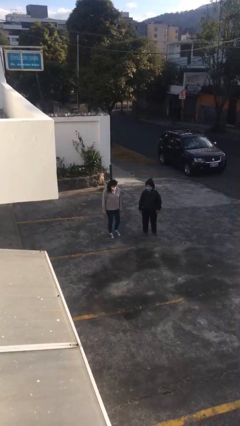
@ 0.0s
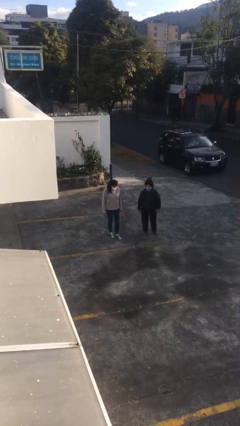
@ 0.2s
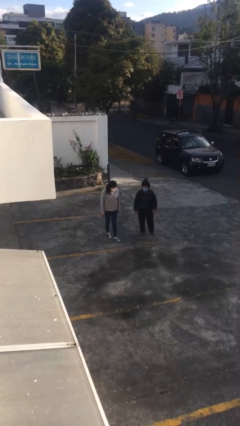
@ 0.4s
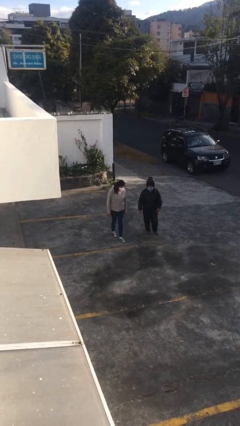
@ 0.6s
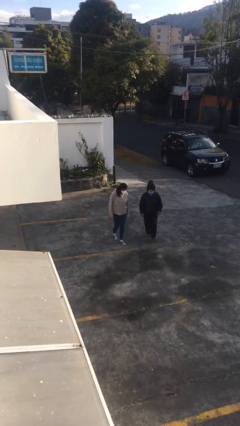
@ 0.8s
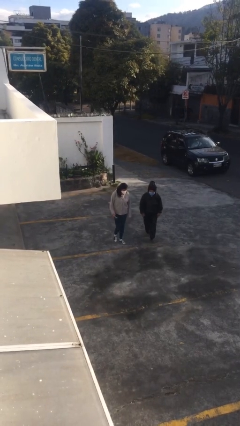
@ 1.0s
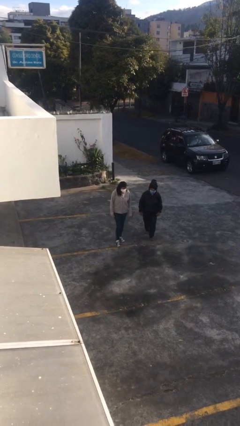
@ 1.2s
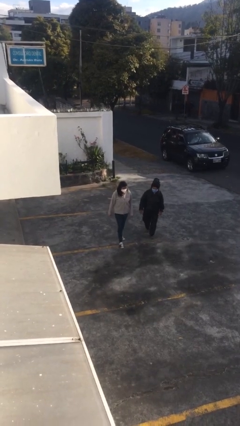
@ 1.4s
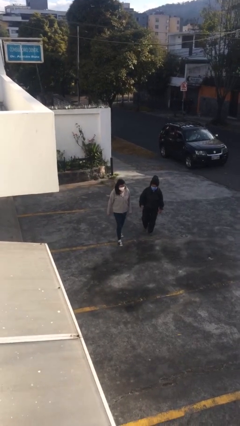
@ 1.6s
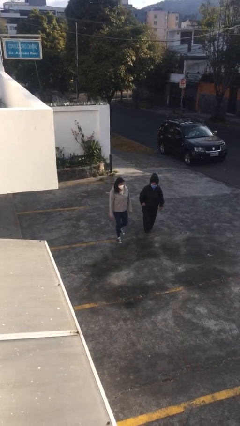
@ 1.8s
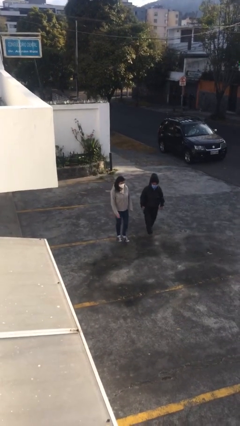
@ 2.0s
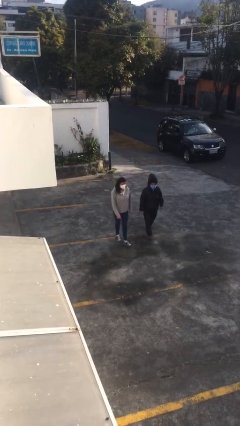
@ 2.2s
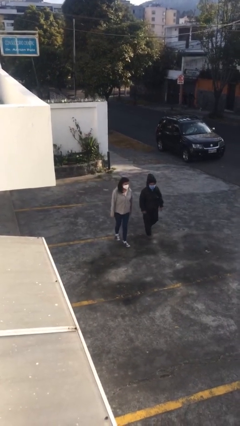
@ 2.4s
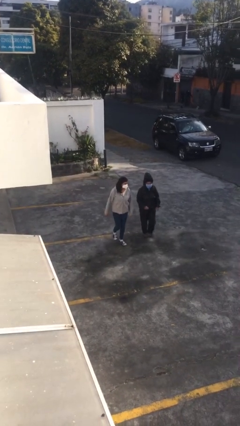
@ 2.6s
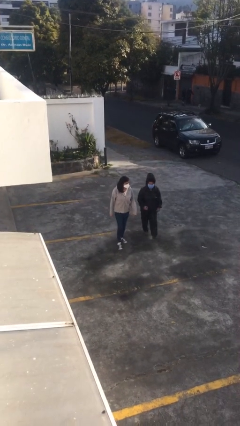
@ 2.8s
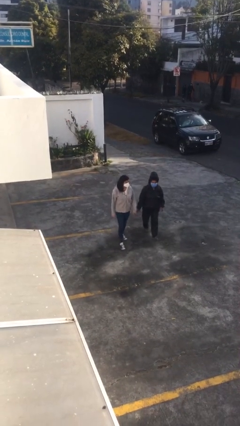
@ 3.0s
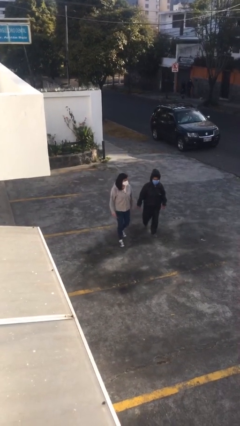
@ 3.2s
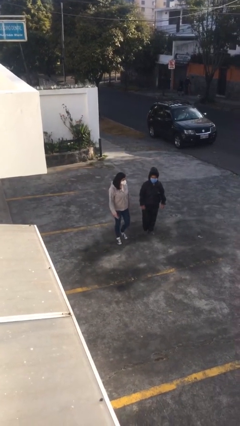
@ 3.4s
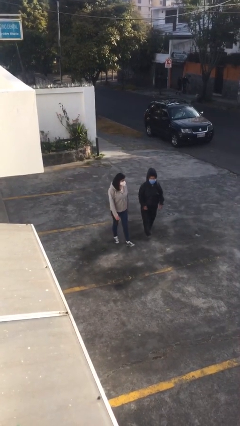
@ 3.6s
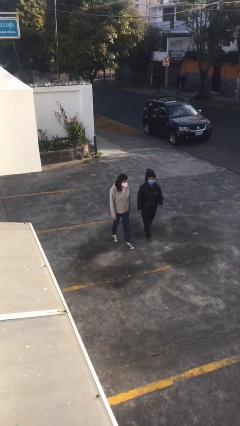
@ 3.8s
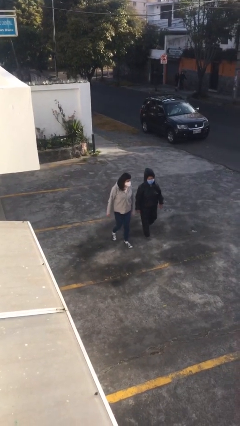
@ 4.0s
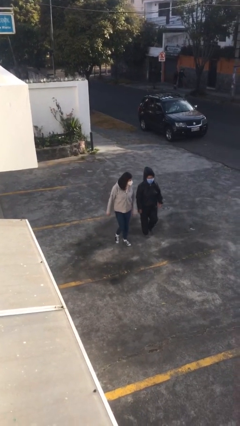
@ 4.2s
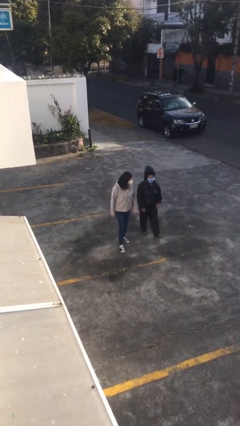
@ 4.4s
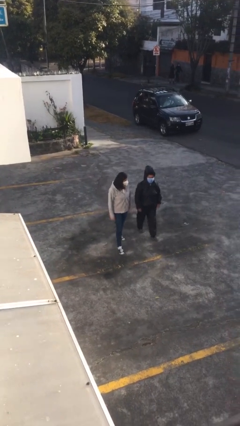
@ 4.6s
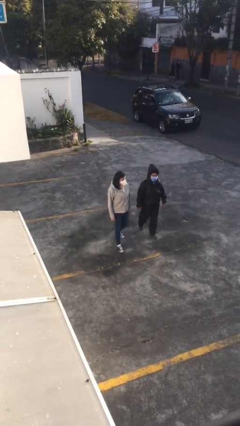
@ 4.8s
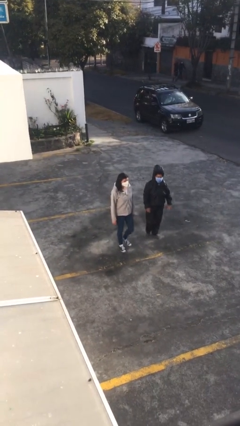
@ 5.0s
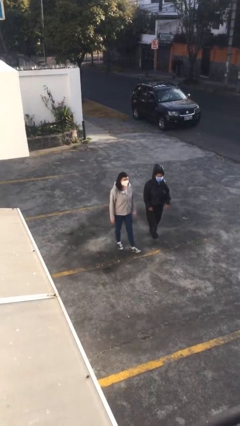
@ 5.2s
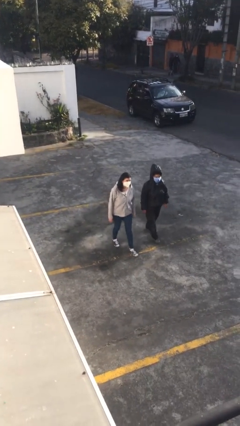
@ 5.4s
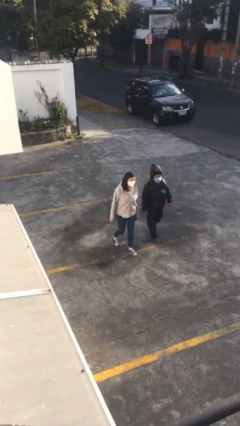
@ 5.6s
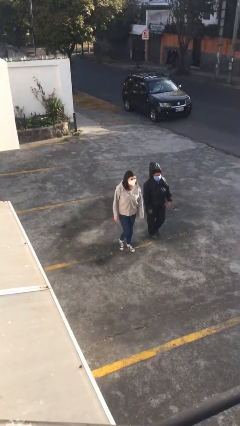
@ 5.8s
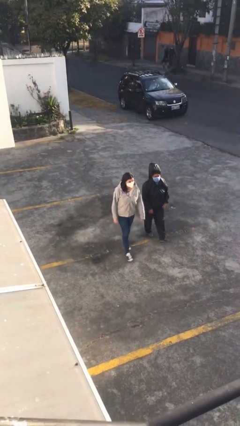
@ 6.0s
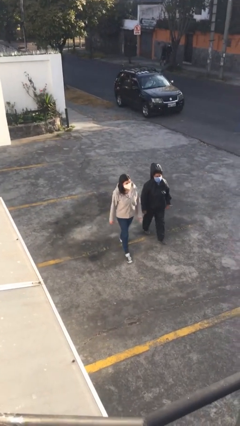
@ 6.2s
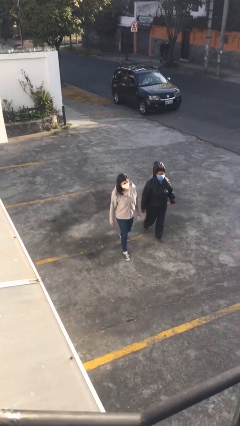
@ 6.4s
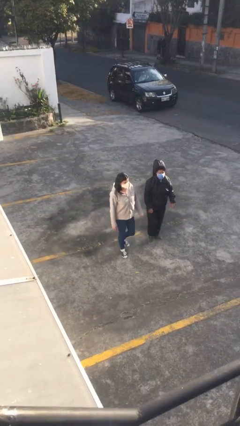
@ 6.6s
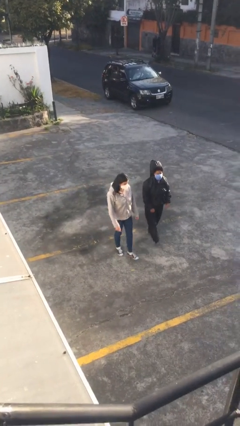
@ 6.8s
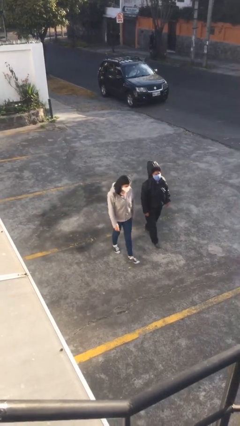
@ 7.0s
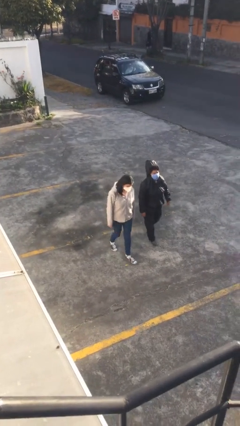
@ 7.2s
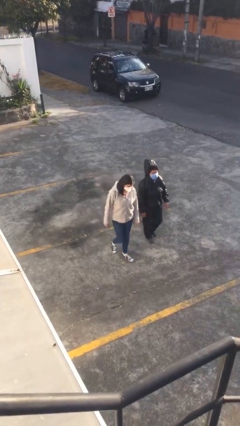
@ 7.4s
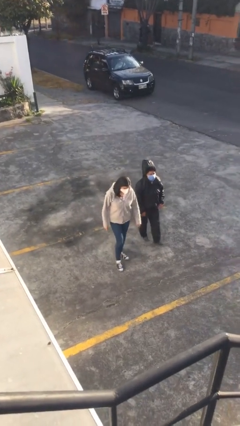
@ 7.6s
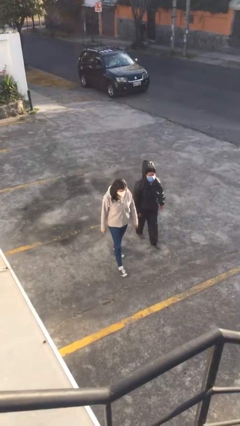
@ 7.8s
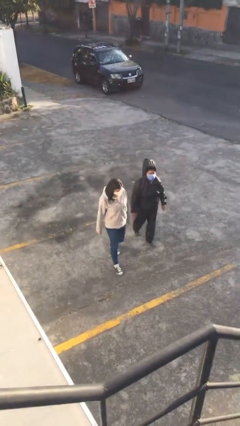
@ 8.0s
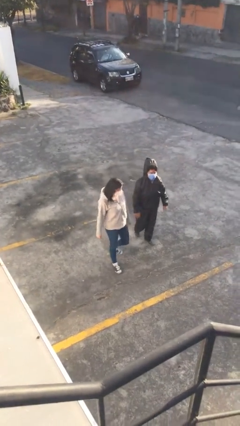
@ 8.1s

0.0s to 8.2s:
person talks to person

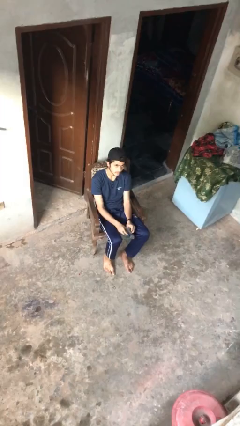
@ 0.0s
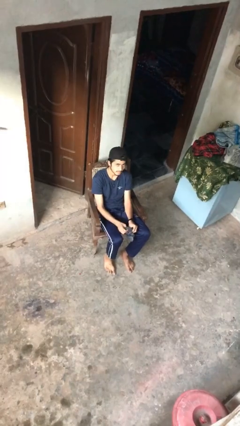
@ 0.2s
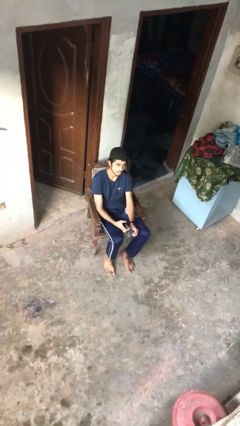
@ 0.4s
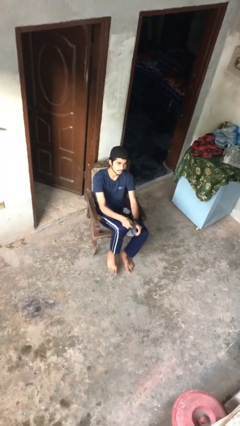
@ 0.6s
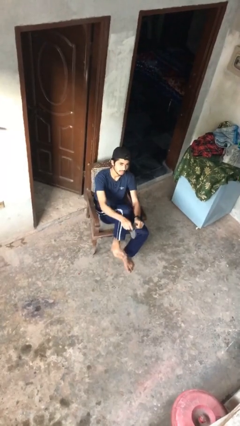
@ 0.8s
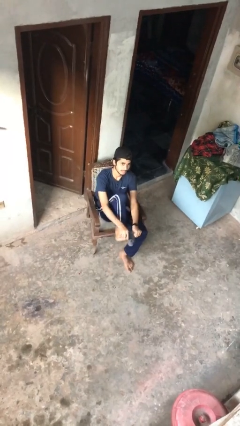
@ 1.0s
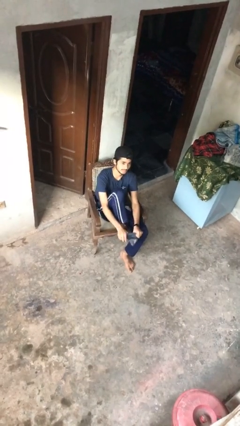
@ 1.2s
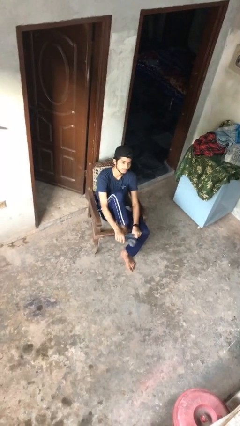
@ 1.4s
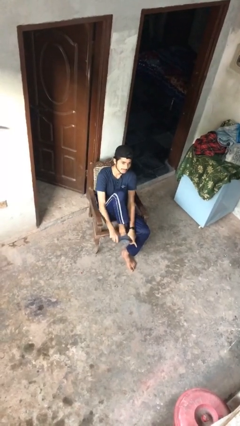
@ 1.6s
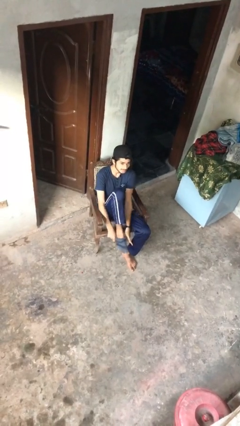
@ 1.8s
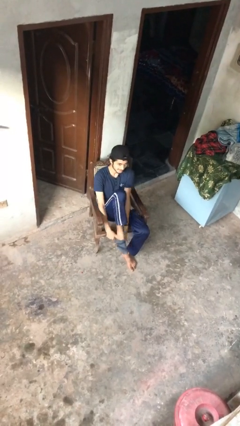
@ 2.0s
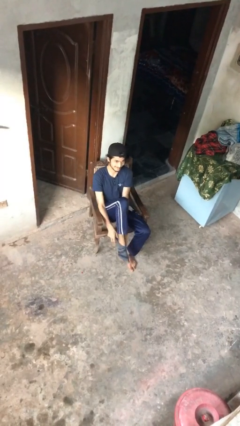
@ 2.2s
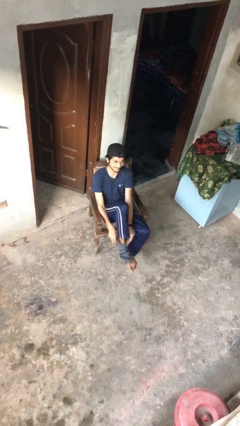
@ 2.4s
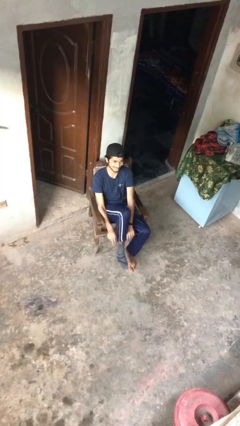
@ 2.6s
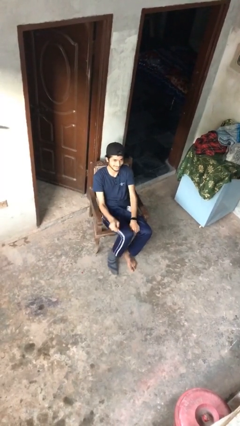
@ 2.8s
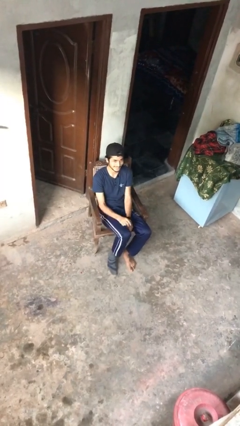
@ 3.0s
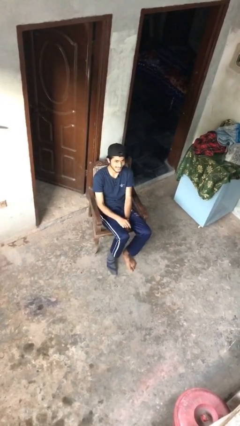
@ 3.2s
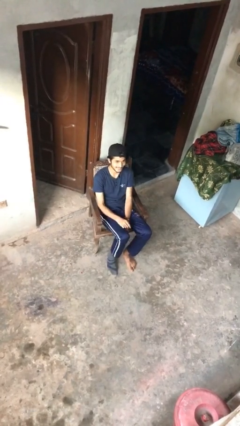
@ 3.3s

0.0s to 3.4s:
person puts on socks

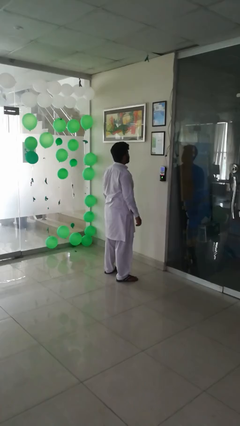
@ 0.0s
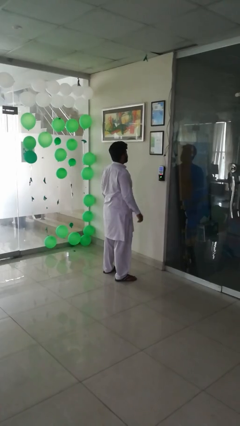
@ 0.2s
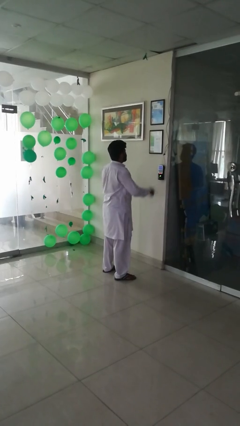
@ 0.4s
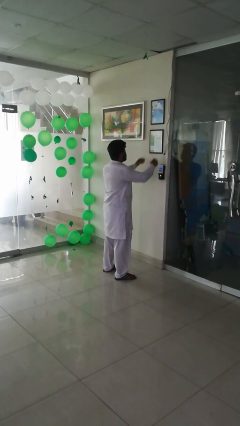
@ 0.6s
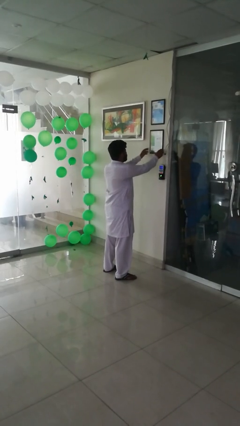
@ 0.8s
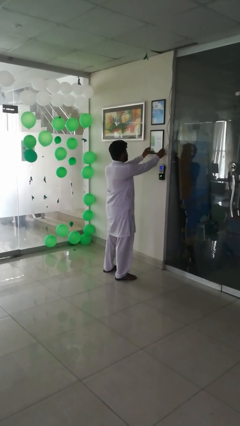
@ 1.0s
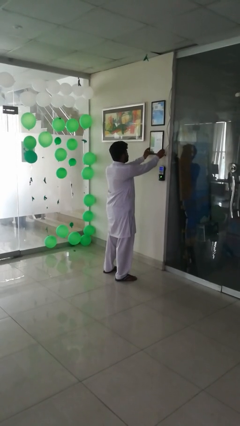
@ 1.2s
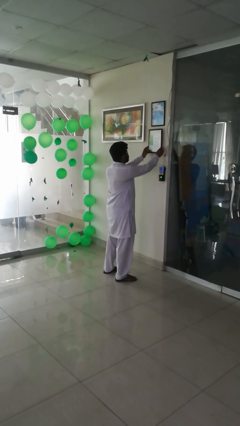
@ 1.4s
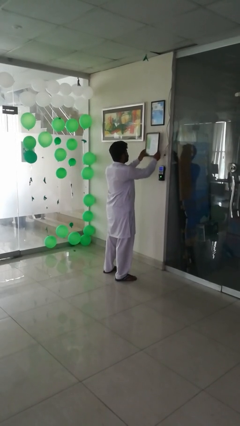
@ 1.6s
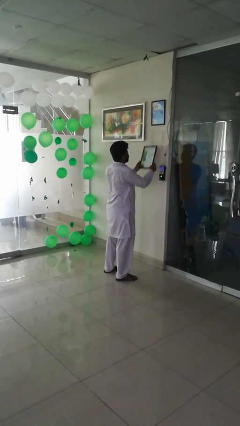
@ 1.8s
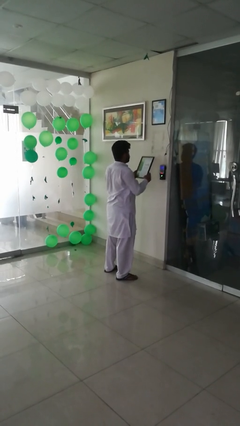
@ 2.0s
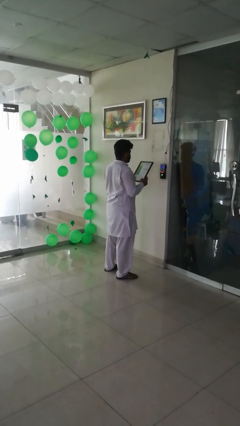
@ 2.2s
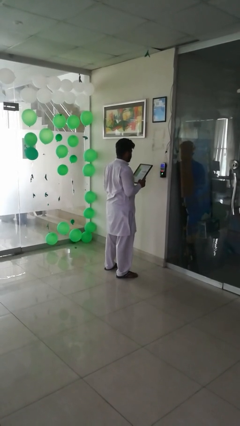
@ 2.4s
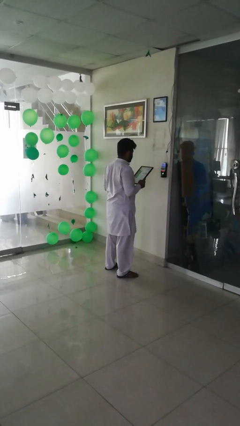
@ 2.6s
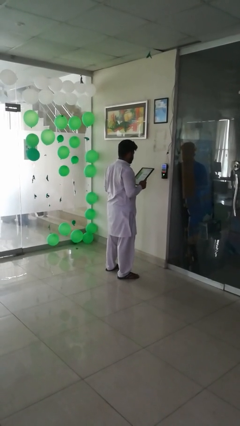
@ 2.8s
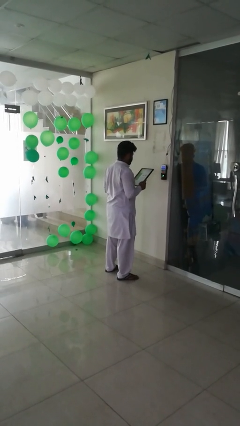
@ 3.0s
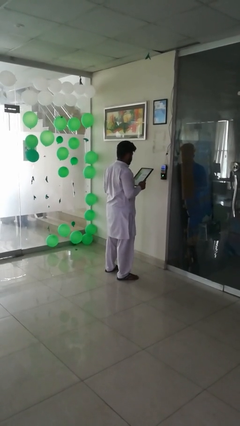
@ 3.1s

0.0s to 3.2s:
person takes down smoke detector

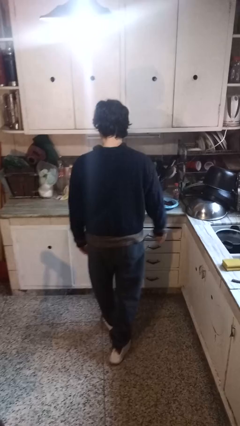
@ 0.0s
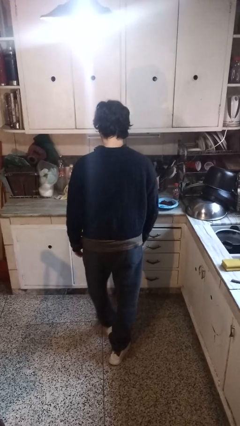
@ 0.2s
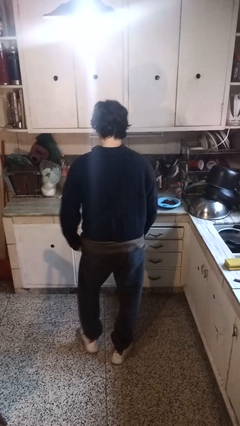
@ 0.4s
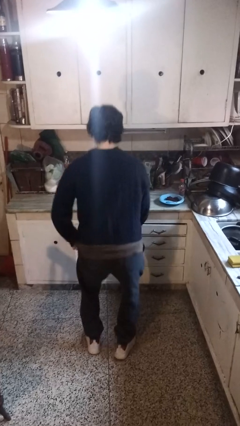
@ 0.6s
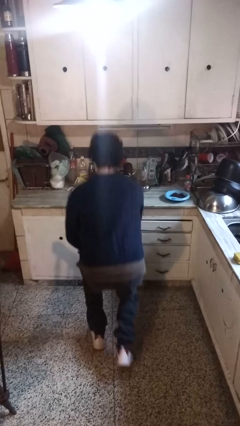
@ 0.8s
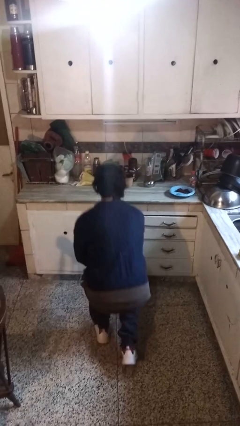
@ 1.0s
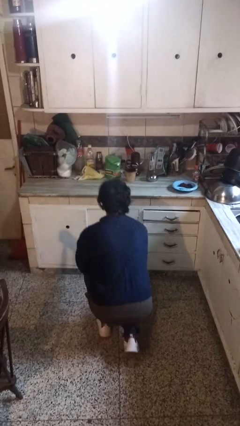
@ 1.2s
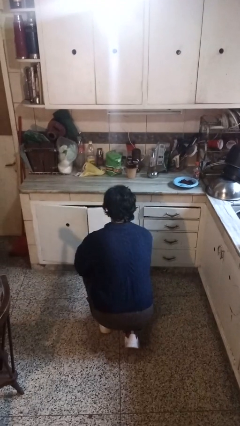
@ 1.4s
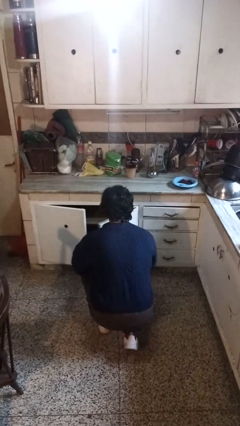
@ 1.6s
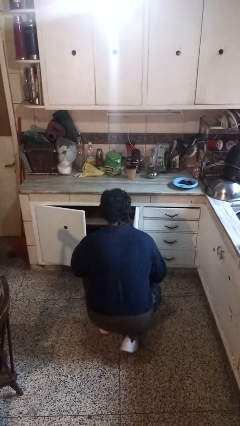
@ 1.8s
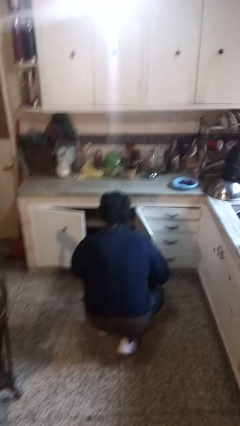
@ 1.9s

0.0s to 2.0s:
person opens cabinet

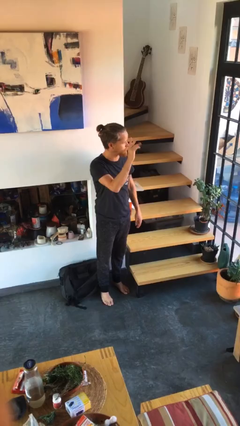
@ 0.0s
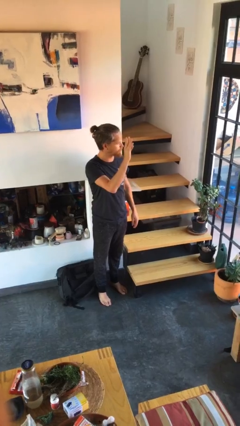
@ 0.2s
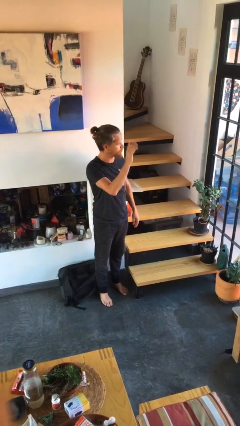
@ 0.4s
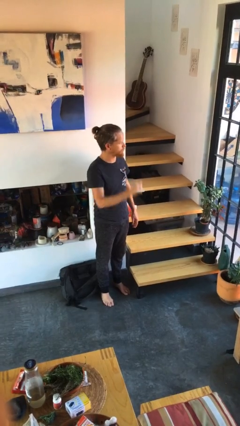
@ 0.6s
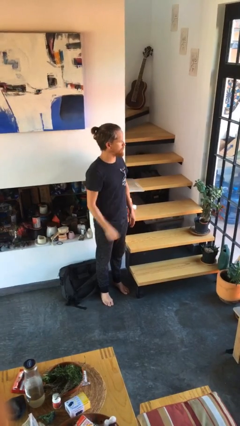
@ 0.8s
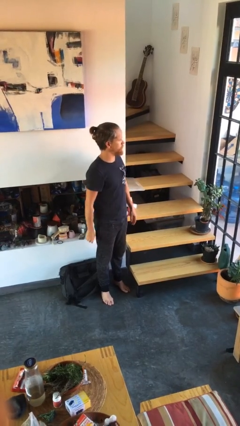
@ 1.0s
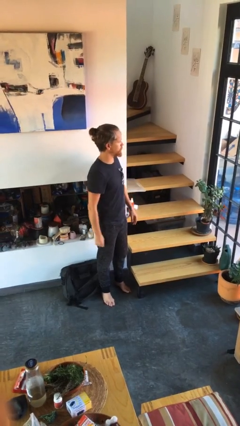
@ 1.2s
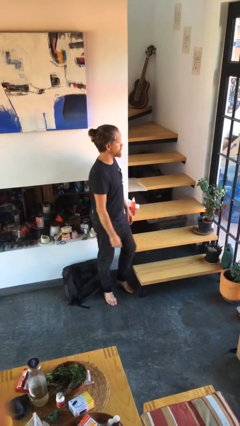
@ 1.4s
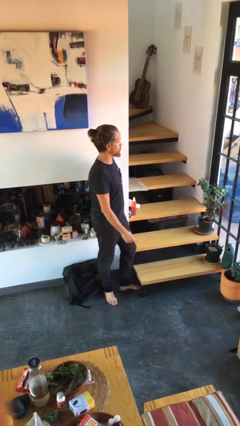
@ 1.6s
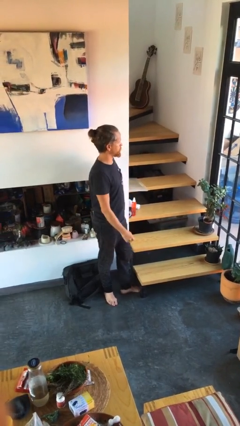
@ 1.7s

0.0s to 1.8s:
person gestures lower hand
